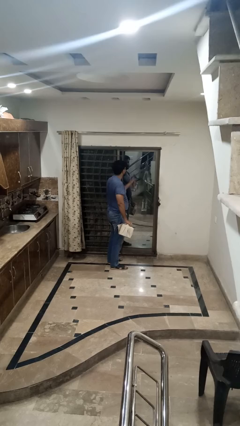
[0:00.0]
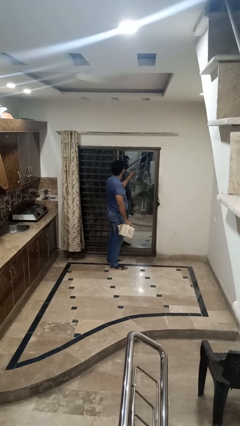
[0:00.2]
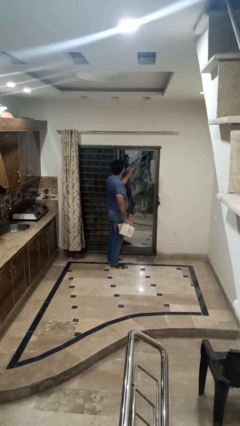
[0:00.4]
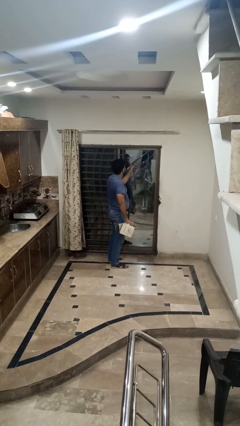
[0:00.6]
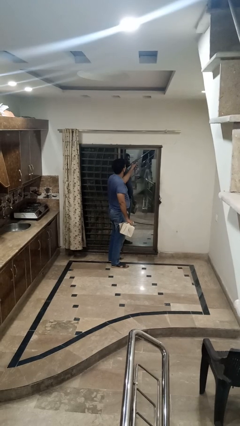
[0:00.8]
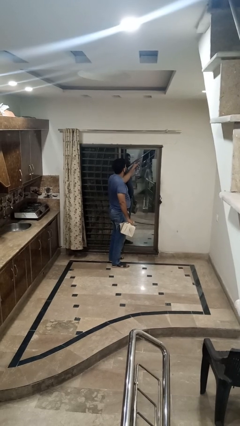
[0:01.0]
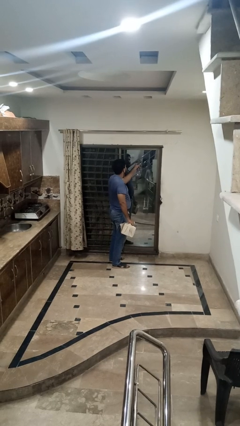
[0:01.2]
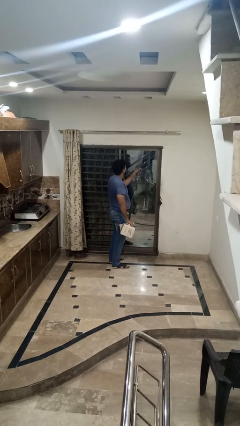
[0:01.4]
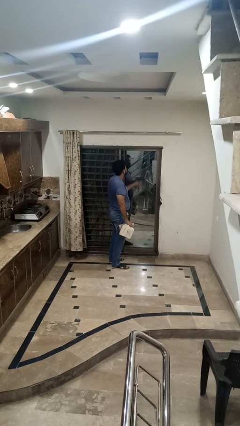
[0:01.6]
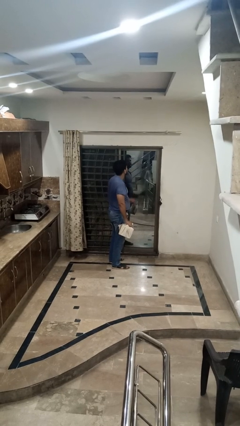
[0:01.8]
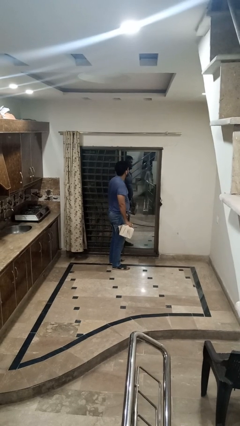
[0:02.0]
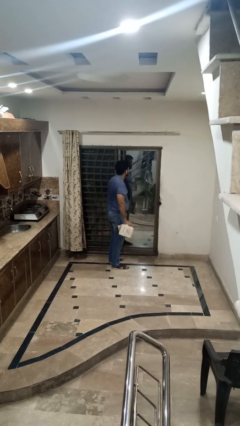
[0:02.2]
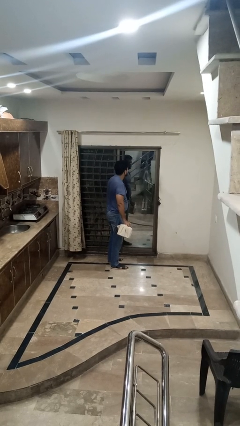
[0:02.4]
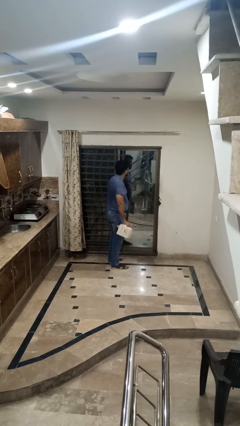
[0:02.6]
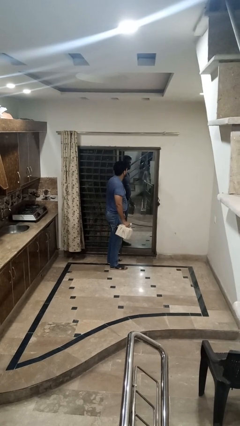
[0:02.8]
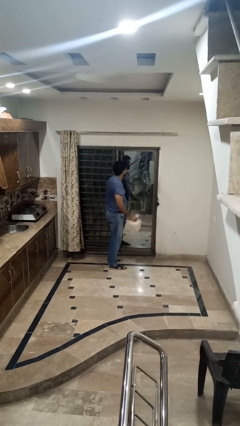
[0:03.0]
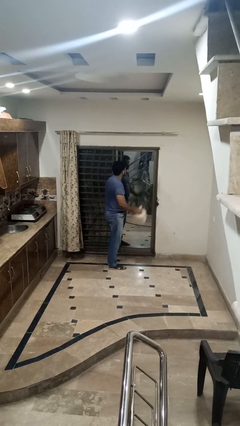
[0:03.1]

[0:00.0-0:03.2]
person sprays from bottle

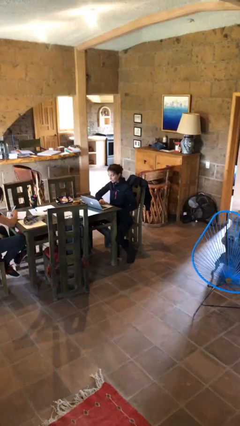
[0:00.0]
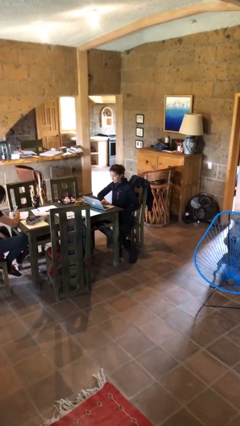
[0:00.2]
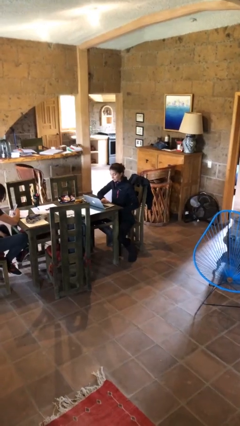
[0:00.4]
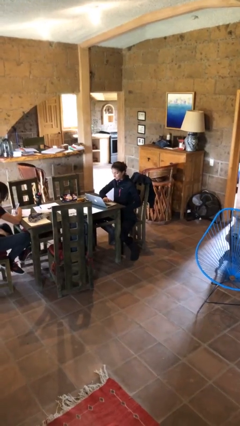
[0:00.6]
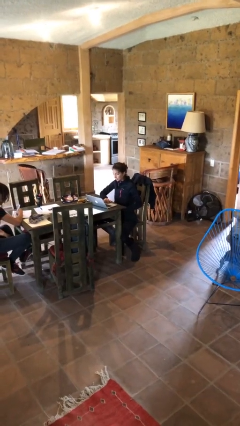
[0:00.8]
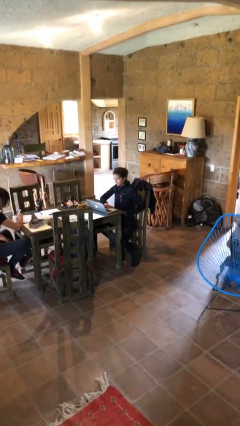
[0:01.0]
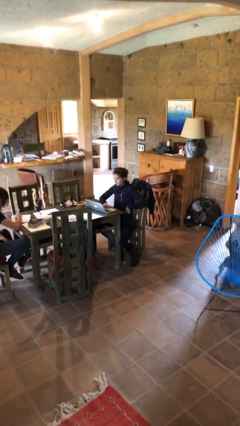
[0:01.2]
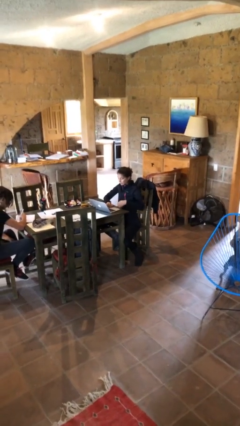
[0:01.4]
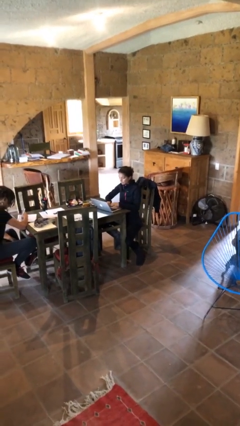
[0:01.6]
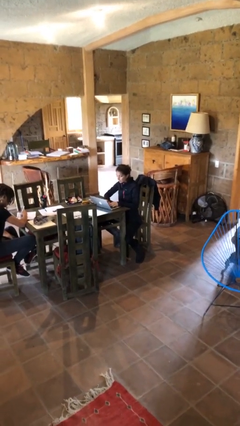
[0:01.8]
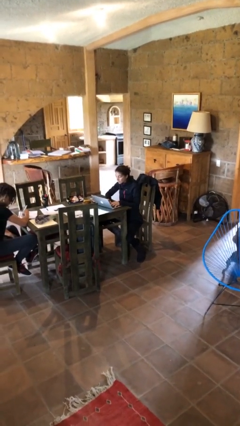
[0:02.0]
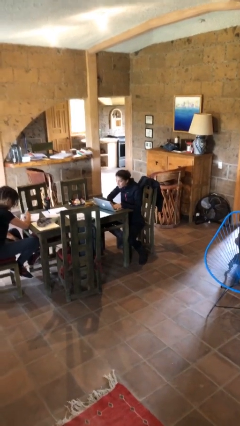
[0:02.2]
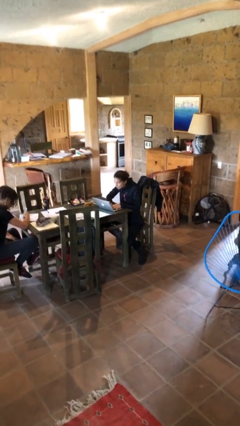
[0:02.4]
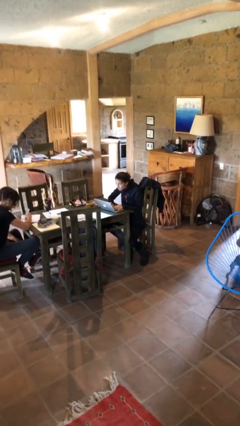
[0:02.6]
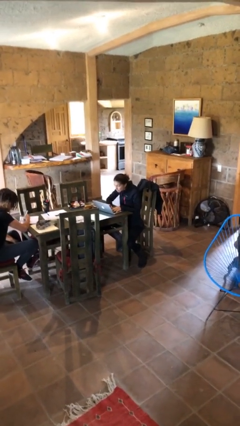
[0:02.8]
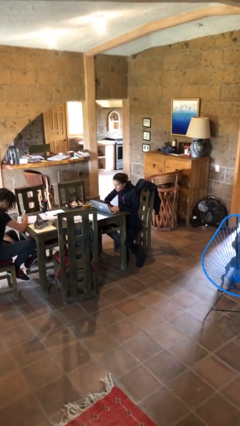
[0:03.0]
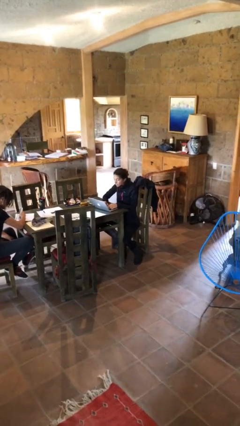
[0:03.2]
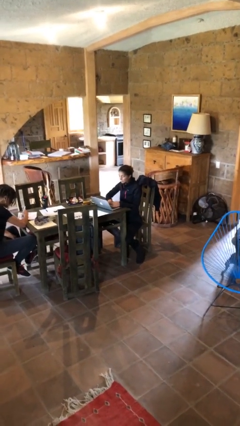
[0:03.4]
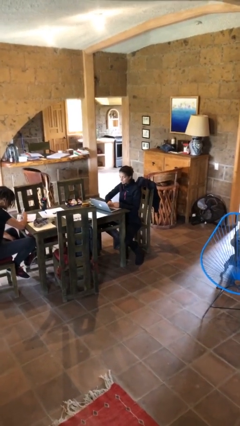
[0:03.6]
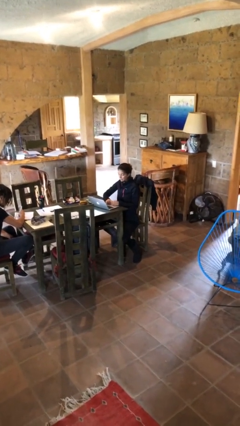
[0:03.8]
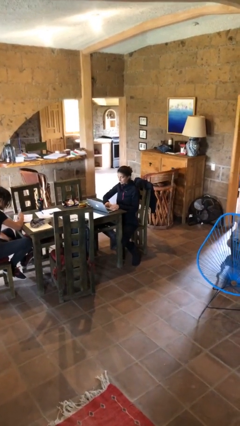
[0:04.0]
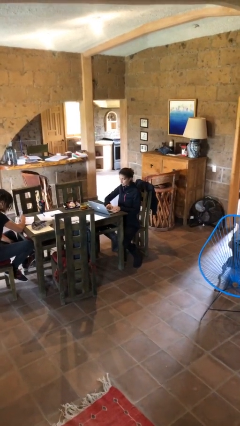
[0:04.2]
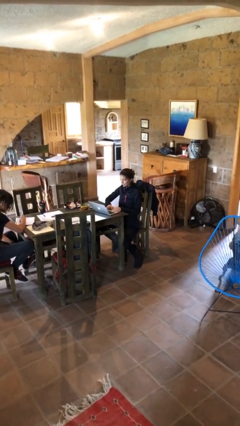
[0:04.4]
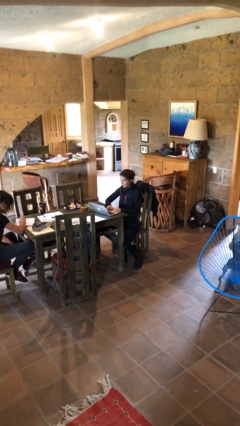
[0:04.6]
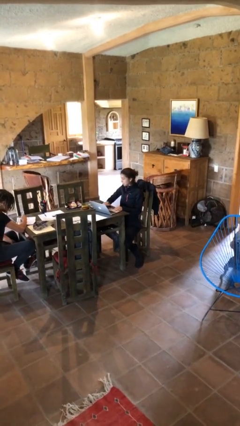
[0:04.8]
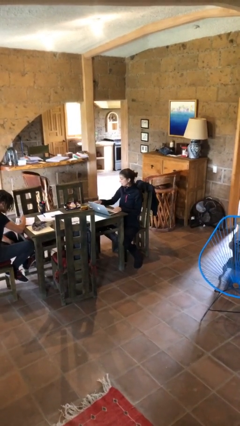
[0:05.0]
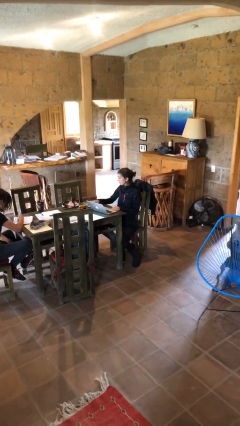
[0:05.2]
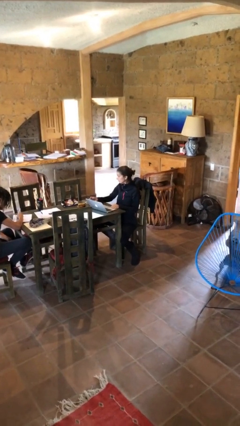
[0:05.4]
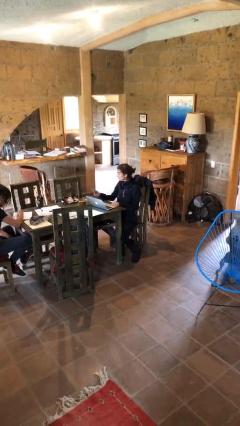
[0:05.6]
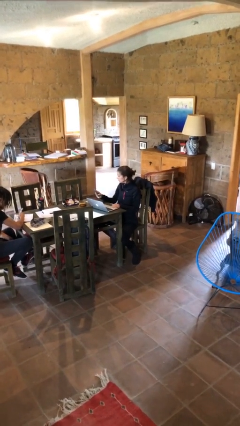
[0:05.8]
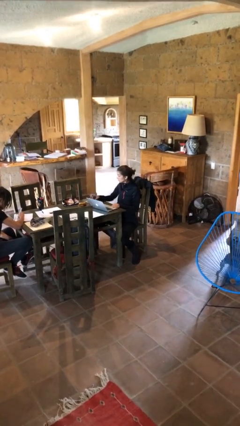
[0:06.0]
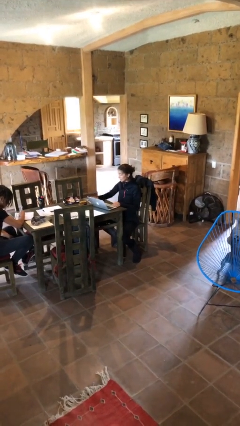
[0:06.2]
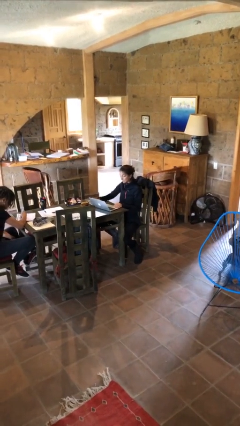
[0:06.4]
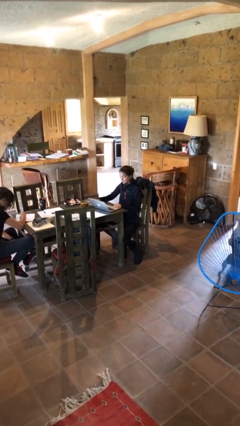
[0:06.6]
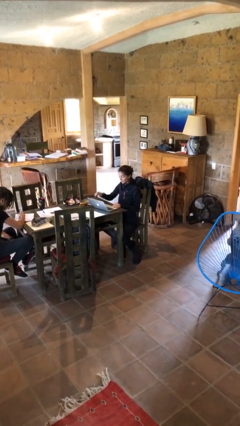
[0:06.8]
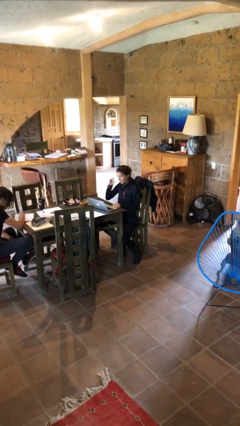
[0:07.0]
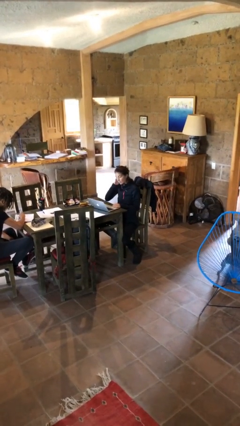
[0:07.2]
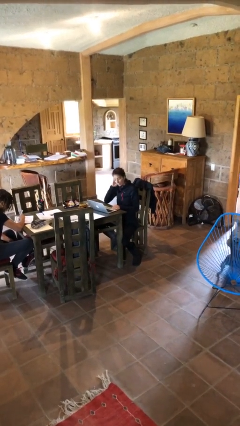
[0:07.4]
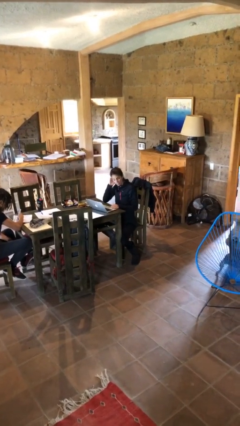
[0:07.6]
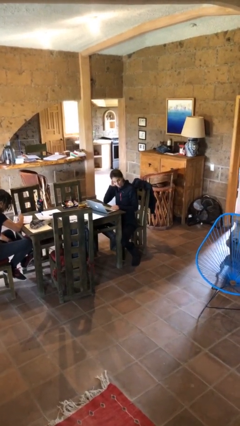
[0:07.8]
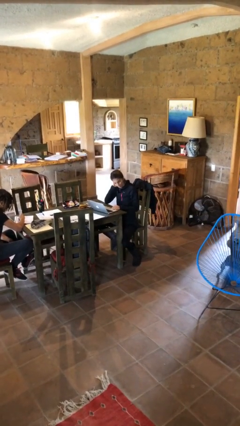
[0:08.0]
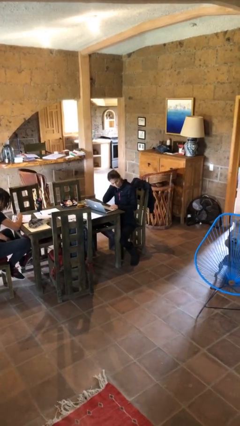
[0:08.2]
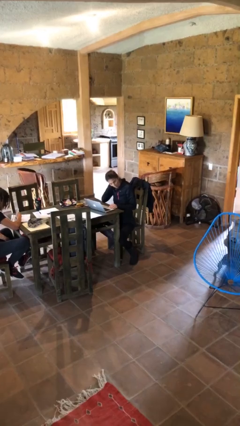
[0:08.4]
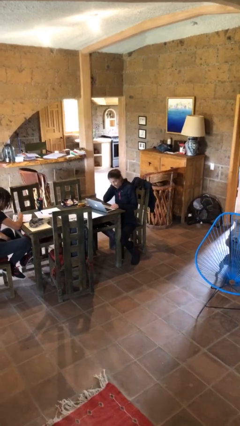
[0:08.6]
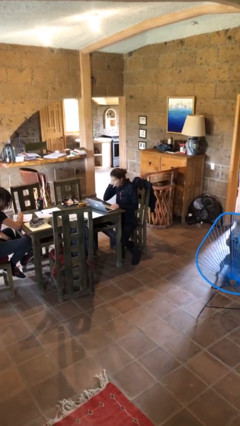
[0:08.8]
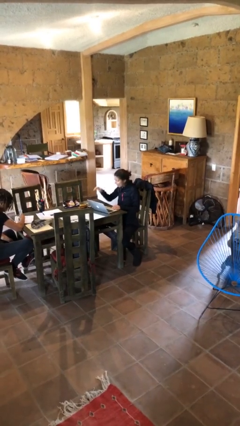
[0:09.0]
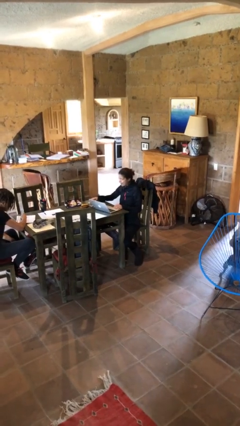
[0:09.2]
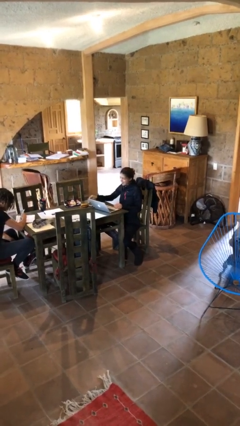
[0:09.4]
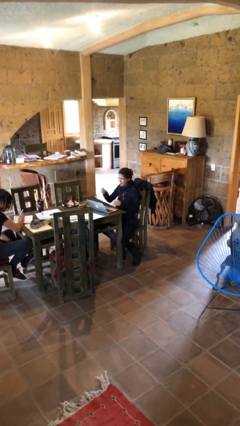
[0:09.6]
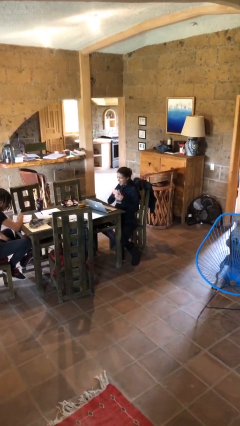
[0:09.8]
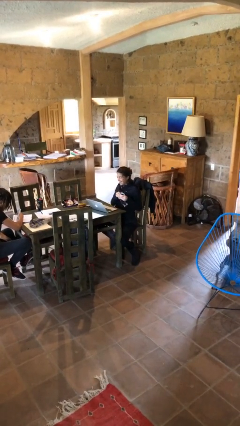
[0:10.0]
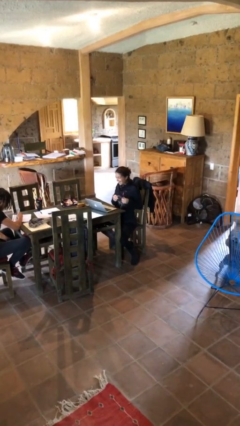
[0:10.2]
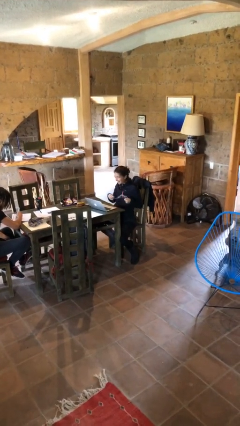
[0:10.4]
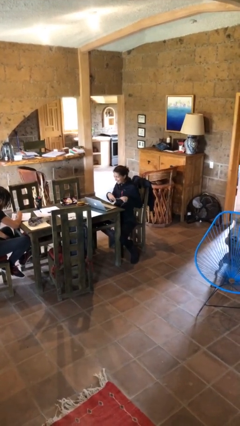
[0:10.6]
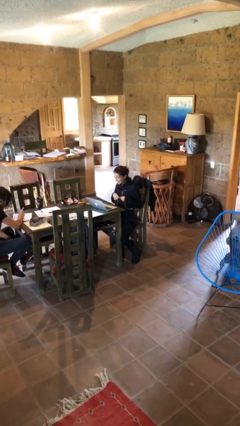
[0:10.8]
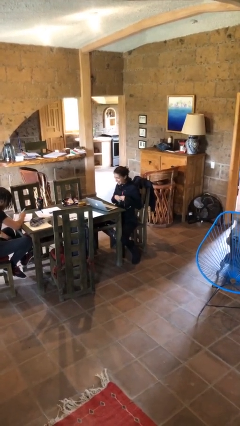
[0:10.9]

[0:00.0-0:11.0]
person interacts with laptop

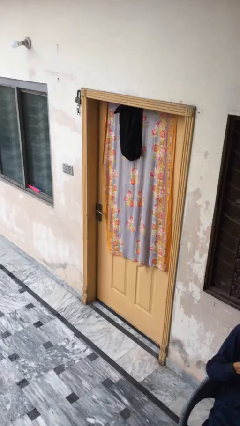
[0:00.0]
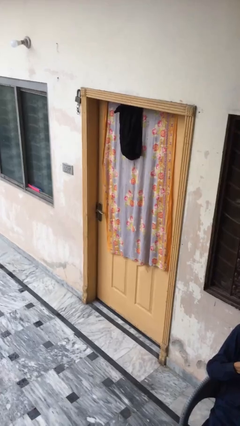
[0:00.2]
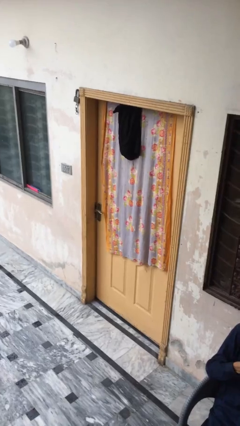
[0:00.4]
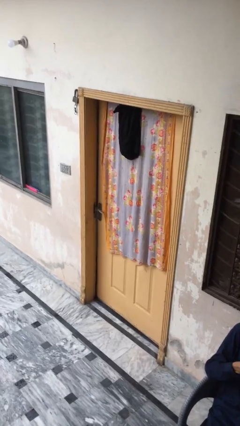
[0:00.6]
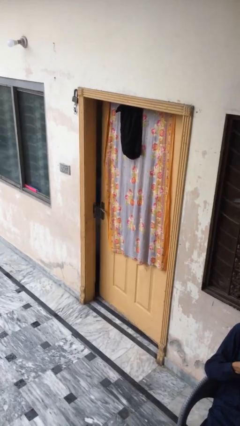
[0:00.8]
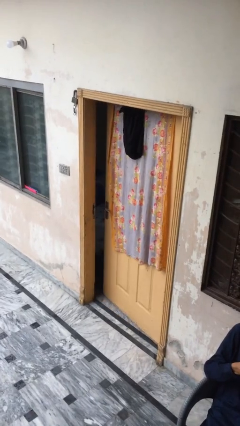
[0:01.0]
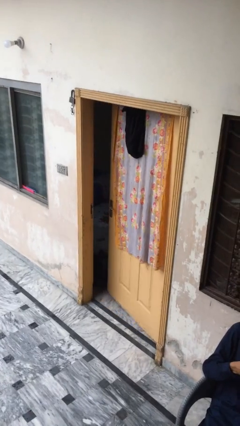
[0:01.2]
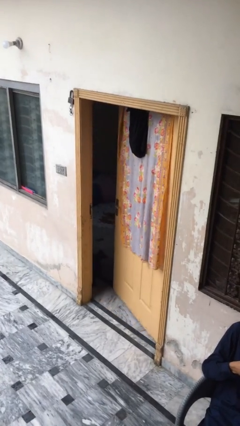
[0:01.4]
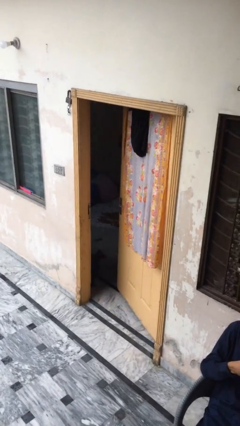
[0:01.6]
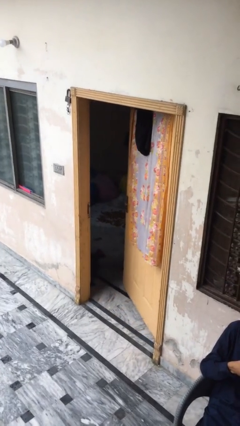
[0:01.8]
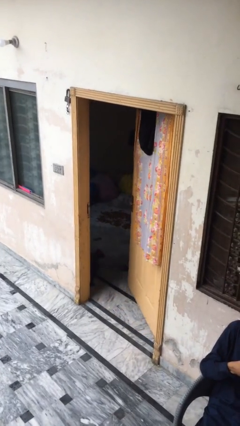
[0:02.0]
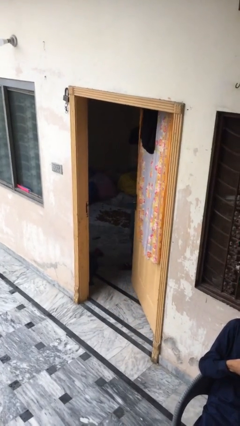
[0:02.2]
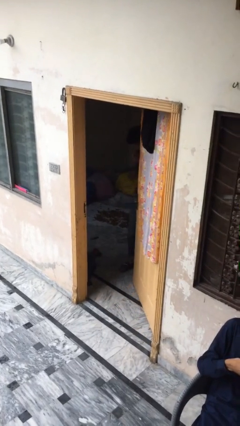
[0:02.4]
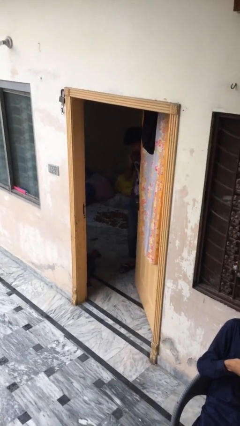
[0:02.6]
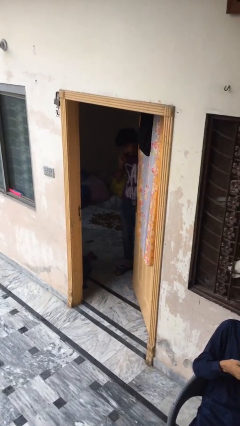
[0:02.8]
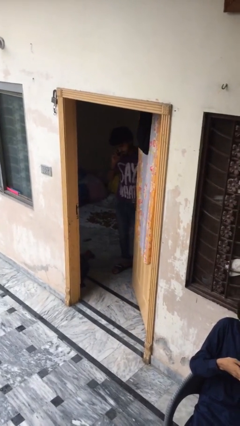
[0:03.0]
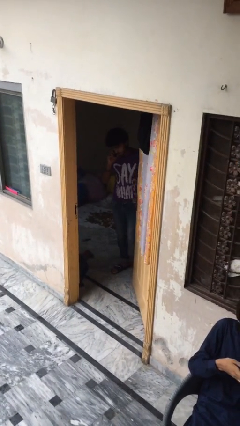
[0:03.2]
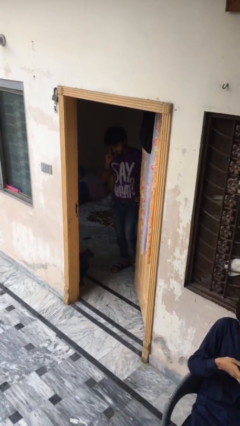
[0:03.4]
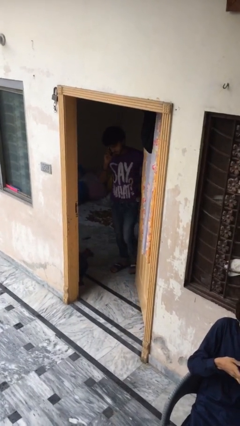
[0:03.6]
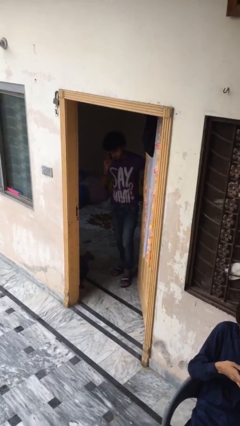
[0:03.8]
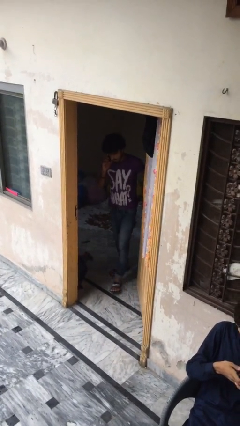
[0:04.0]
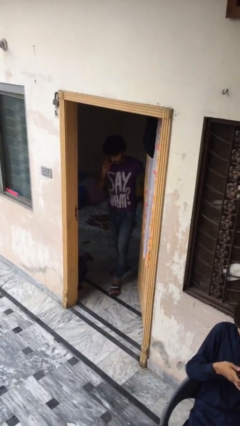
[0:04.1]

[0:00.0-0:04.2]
person opens facility door
